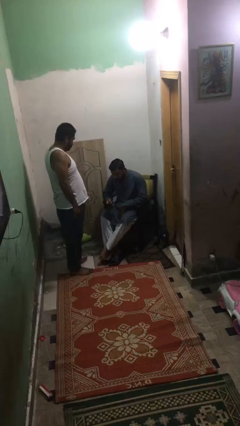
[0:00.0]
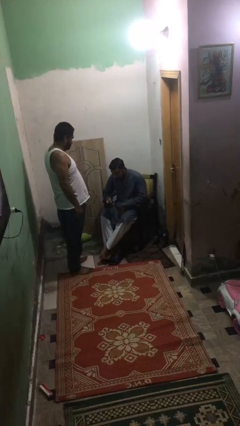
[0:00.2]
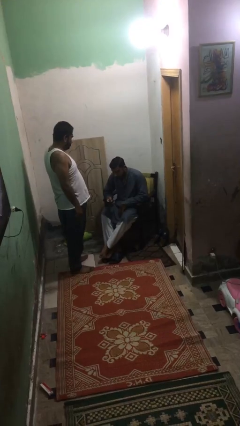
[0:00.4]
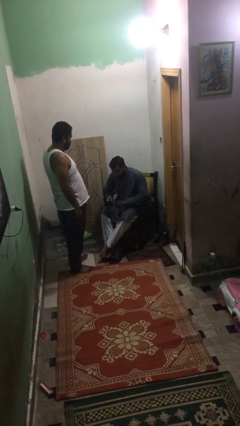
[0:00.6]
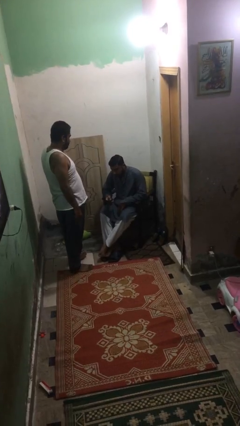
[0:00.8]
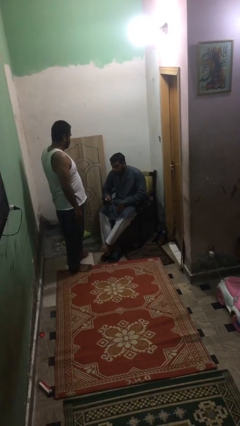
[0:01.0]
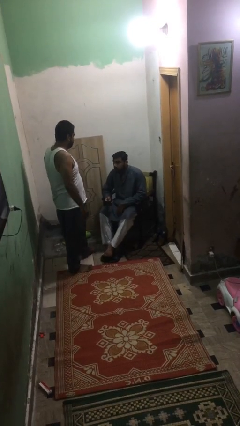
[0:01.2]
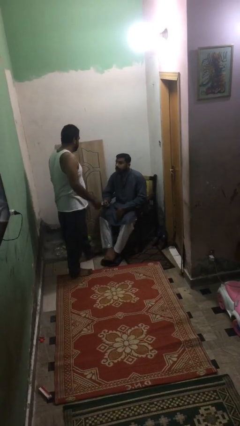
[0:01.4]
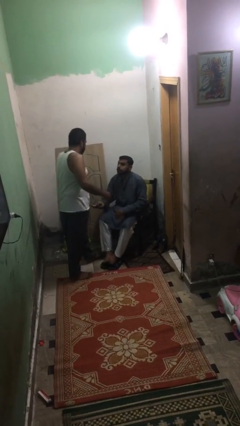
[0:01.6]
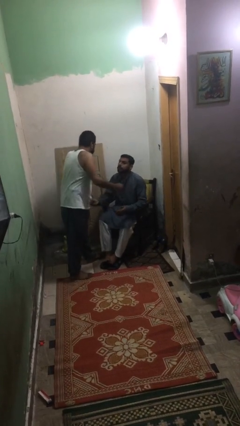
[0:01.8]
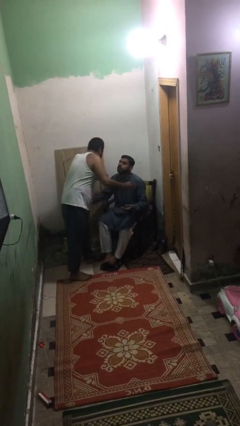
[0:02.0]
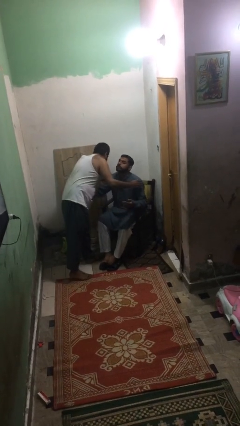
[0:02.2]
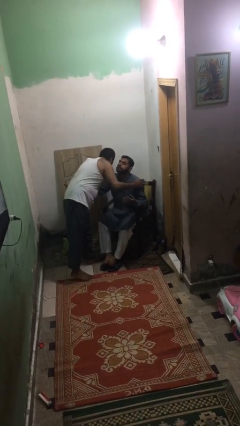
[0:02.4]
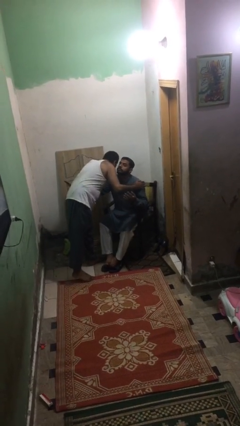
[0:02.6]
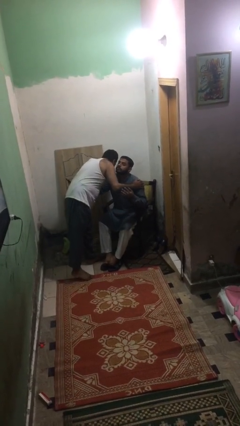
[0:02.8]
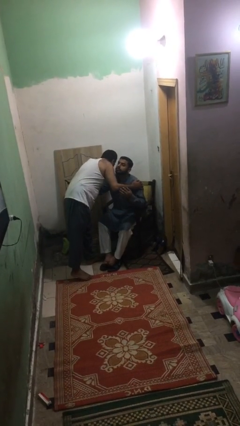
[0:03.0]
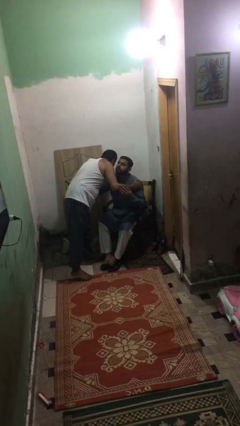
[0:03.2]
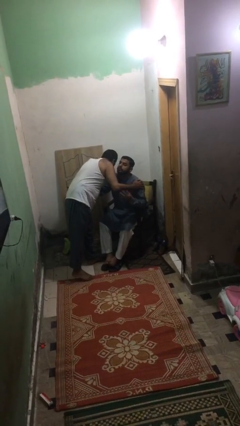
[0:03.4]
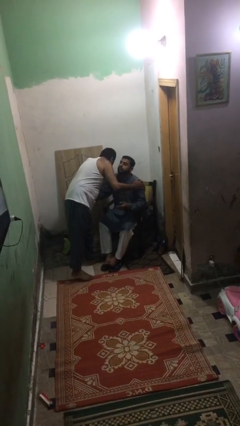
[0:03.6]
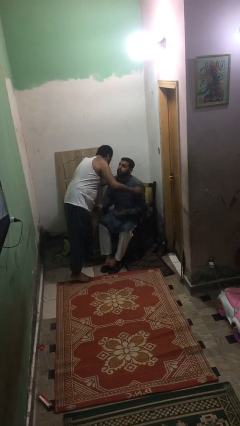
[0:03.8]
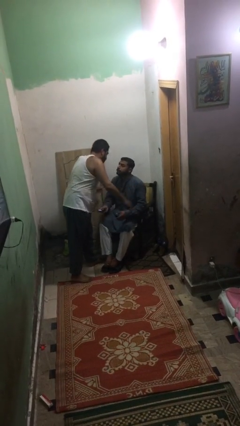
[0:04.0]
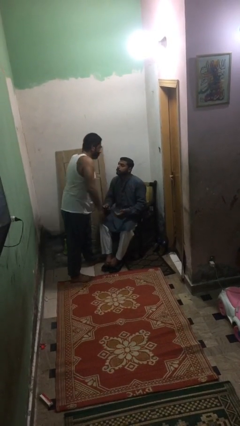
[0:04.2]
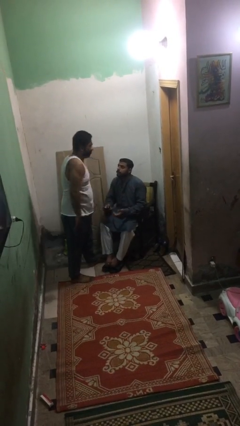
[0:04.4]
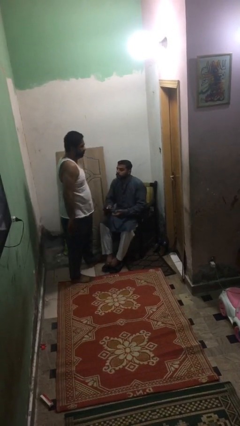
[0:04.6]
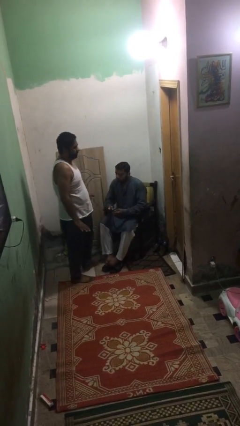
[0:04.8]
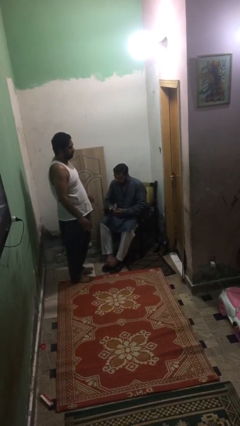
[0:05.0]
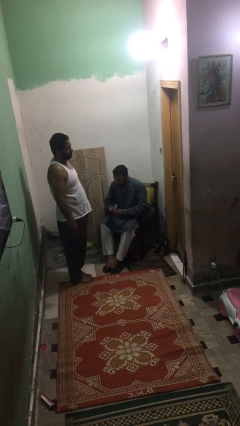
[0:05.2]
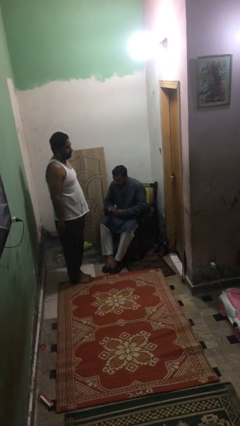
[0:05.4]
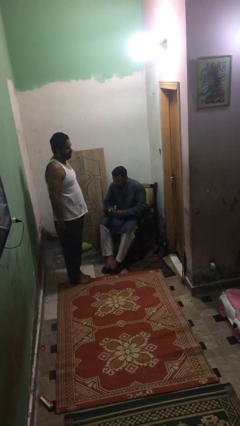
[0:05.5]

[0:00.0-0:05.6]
person embraces person

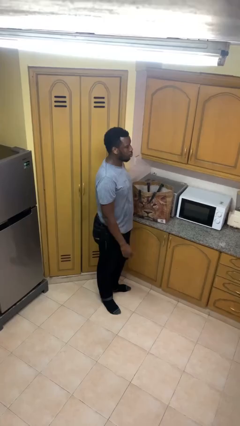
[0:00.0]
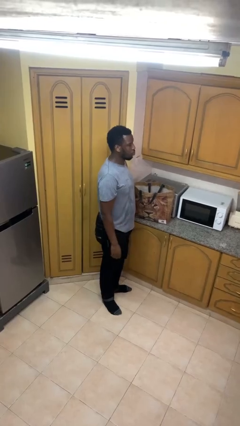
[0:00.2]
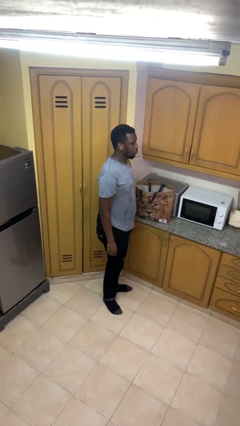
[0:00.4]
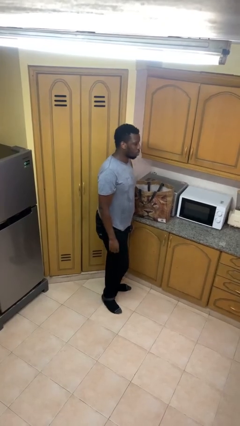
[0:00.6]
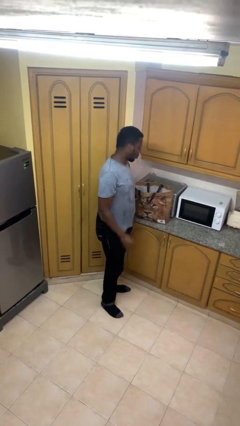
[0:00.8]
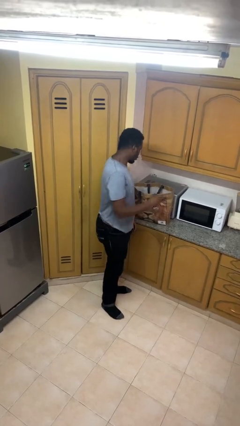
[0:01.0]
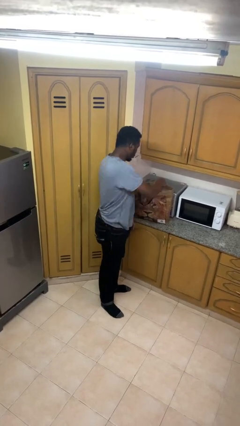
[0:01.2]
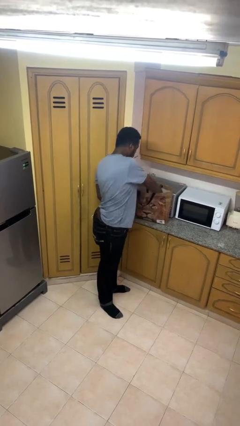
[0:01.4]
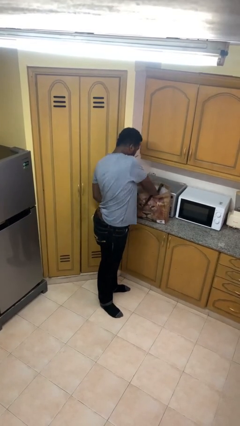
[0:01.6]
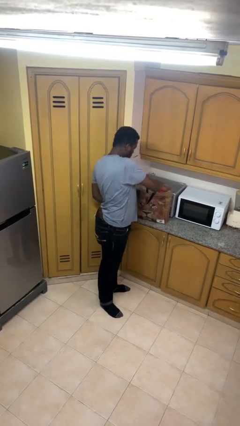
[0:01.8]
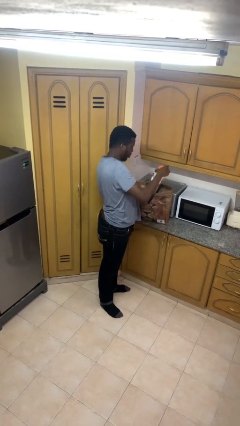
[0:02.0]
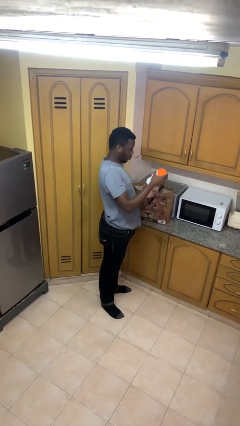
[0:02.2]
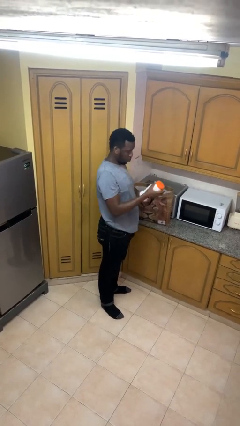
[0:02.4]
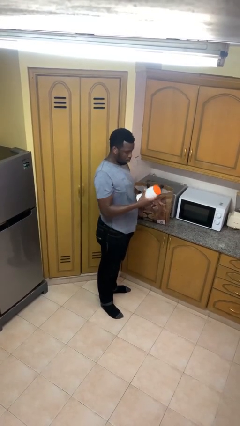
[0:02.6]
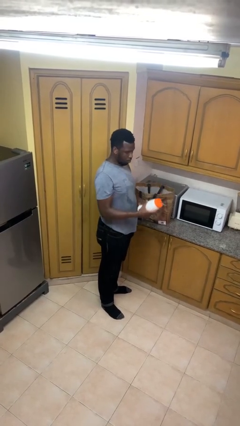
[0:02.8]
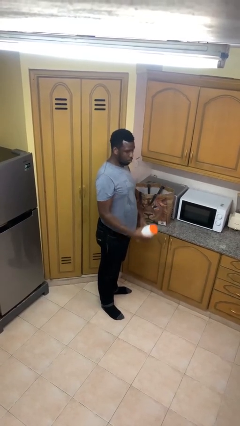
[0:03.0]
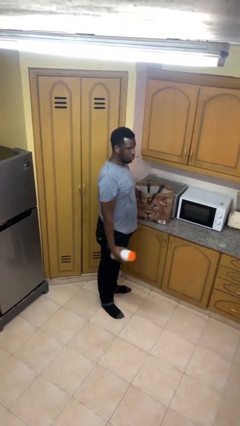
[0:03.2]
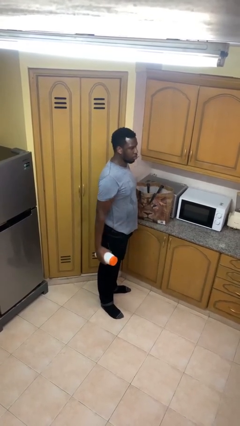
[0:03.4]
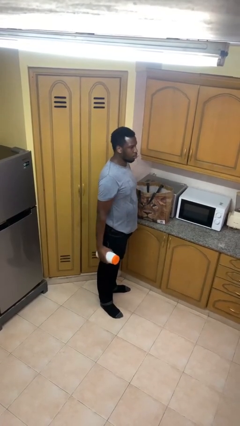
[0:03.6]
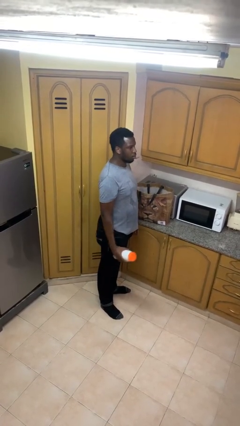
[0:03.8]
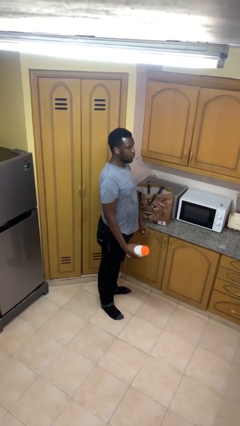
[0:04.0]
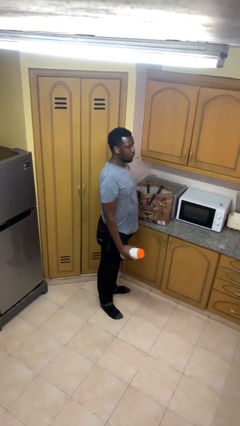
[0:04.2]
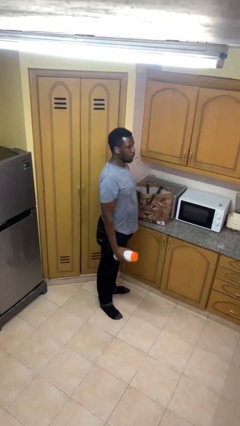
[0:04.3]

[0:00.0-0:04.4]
person takes object from bag

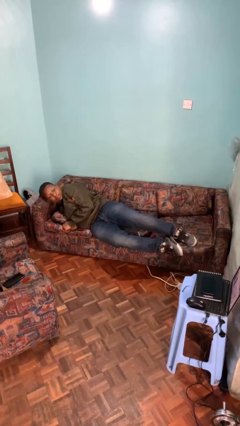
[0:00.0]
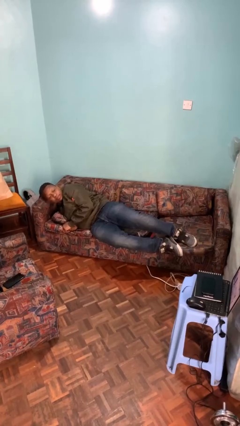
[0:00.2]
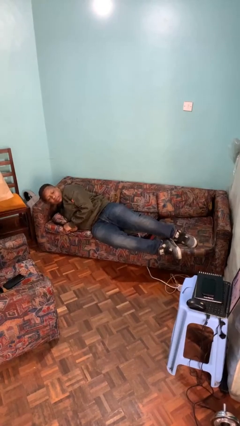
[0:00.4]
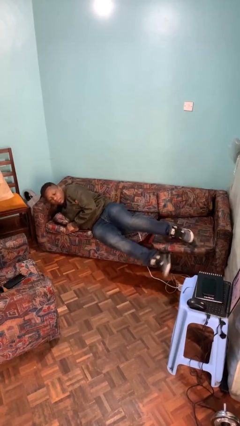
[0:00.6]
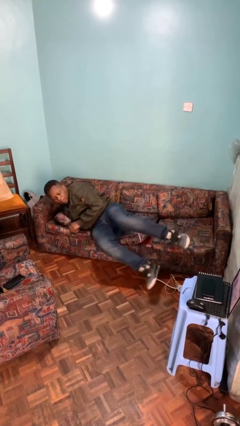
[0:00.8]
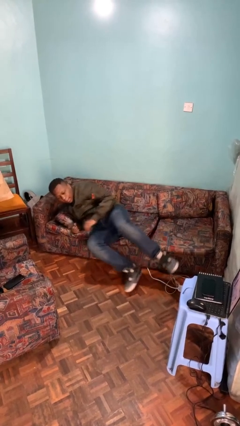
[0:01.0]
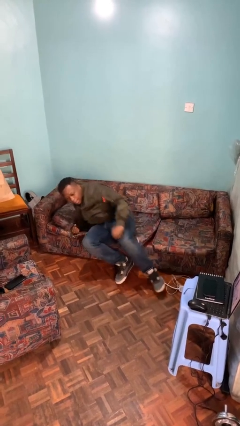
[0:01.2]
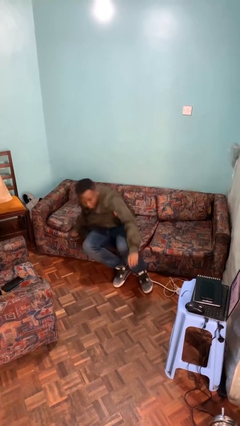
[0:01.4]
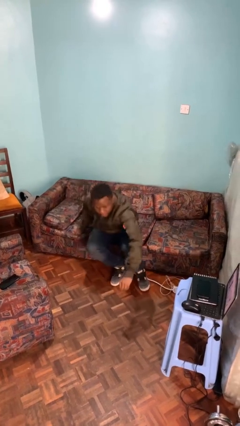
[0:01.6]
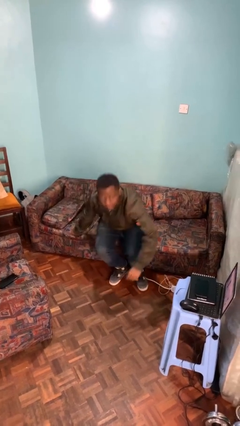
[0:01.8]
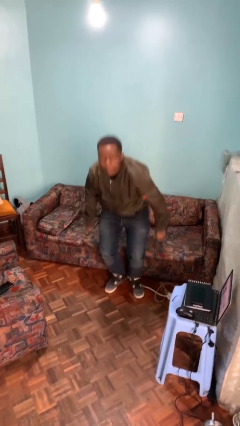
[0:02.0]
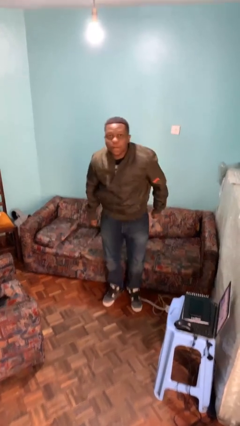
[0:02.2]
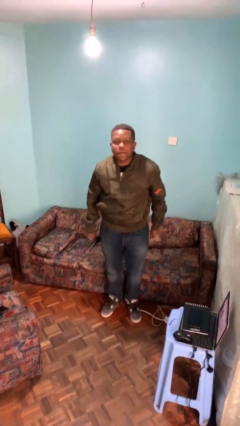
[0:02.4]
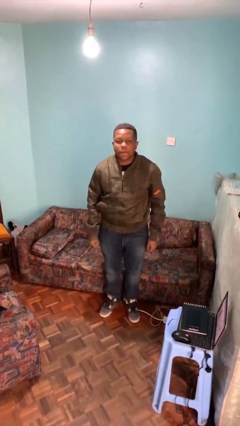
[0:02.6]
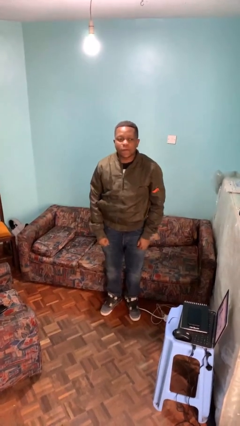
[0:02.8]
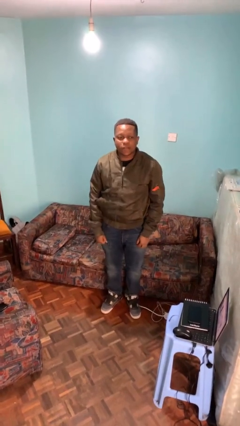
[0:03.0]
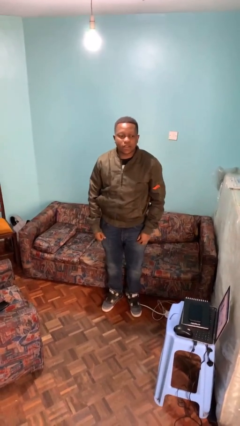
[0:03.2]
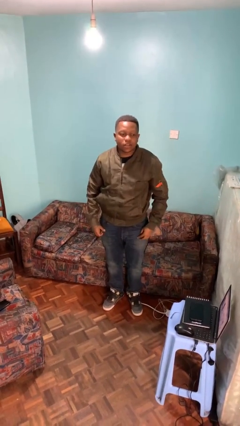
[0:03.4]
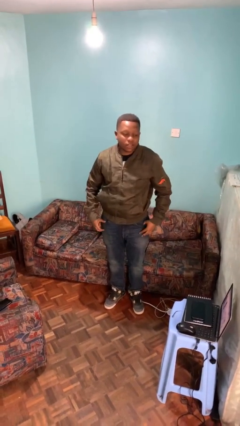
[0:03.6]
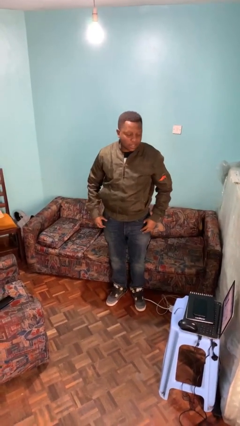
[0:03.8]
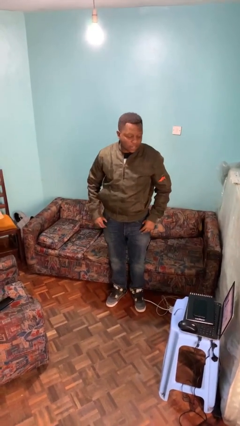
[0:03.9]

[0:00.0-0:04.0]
person stands up

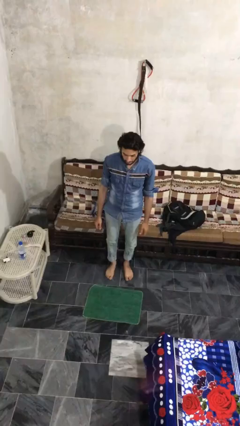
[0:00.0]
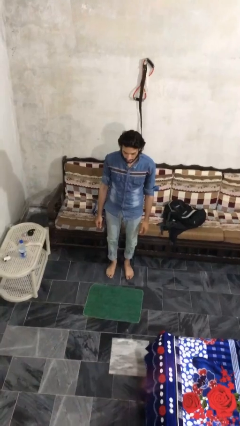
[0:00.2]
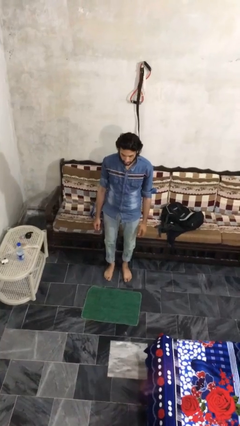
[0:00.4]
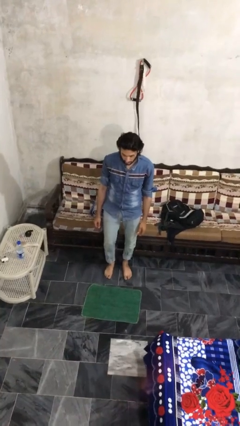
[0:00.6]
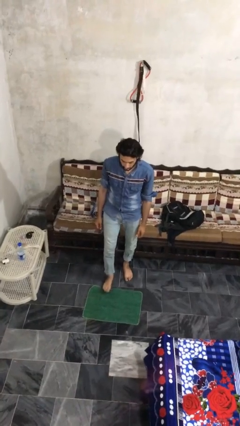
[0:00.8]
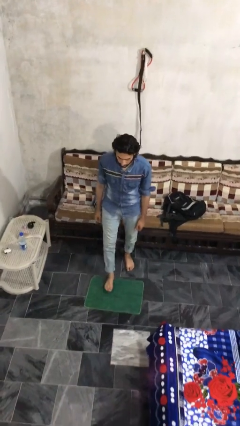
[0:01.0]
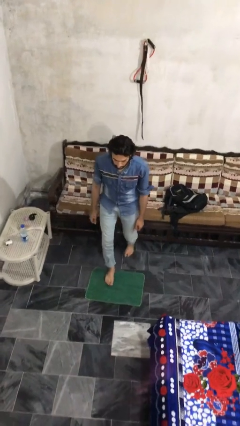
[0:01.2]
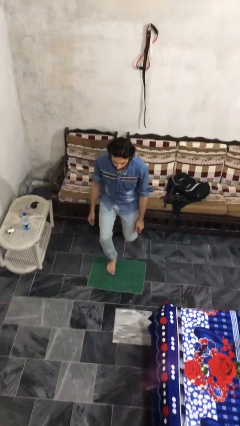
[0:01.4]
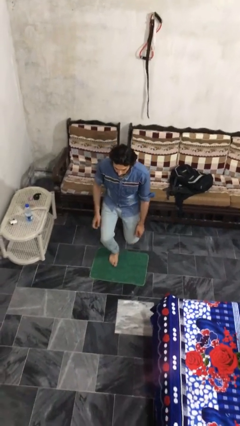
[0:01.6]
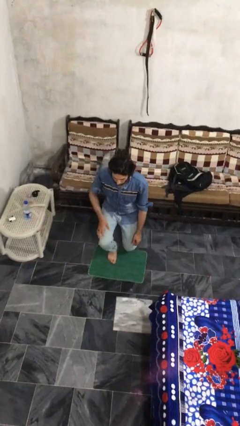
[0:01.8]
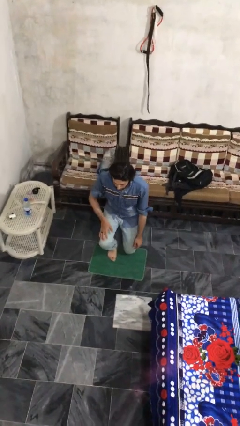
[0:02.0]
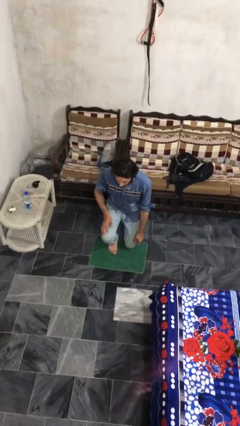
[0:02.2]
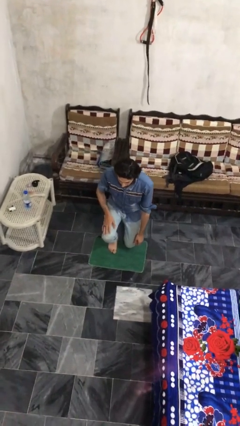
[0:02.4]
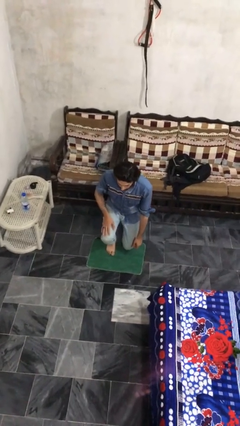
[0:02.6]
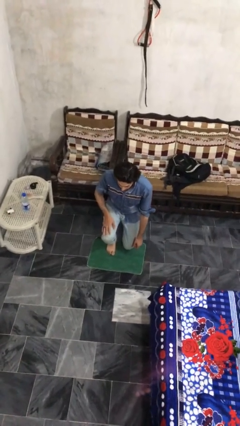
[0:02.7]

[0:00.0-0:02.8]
person kneels

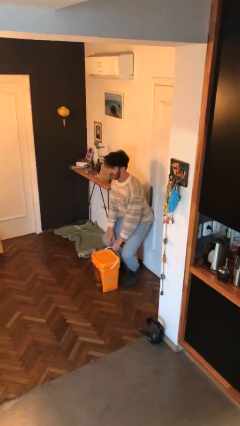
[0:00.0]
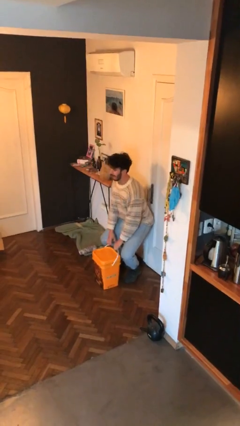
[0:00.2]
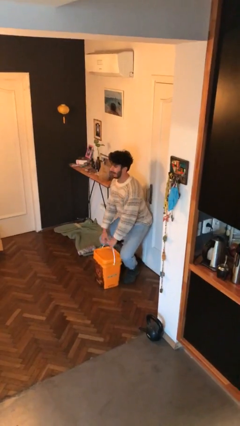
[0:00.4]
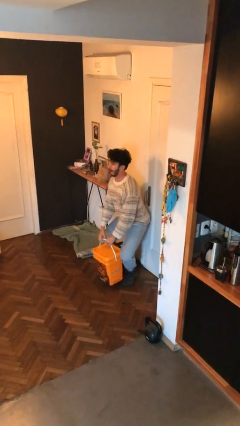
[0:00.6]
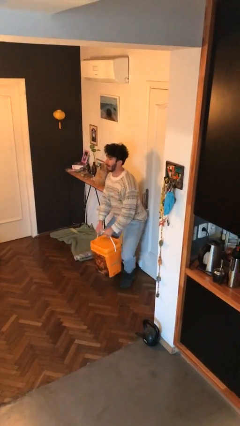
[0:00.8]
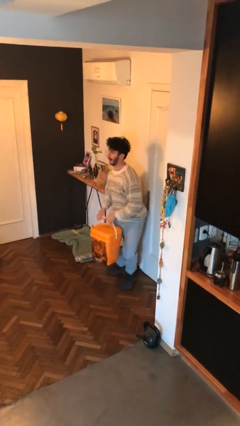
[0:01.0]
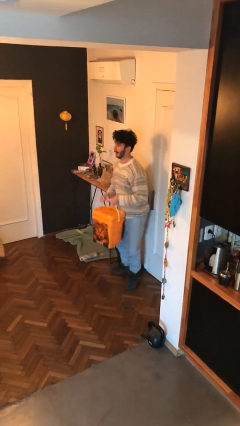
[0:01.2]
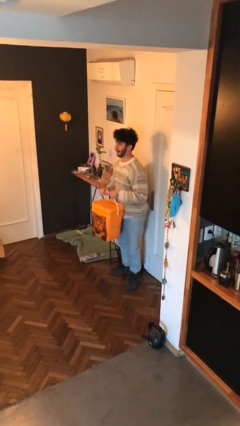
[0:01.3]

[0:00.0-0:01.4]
person picks up object from floor
